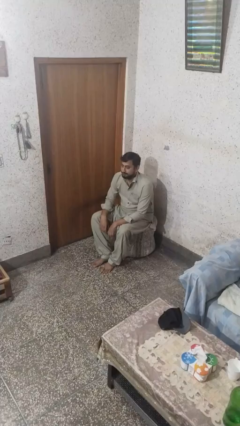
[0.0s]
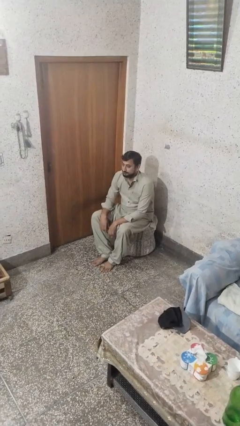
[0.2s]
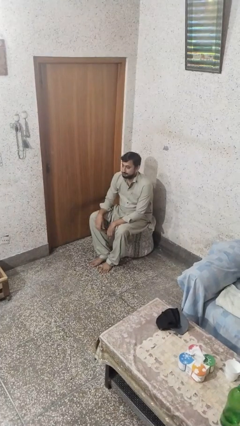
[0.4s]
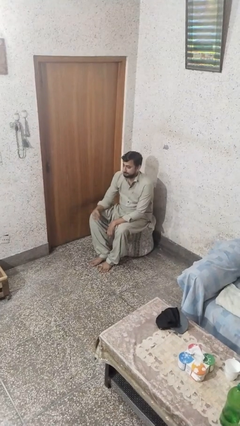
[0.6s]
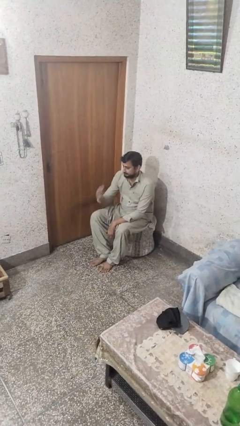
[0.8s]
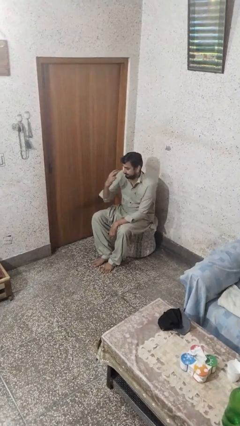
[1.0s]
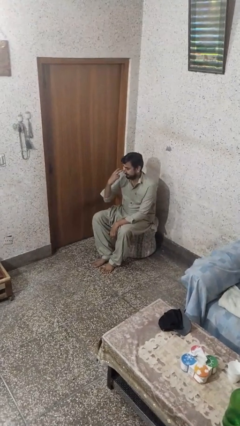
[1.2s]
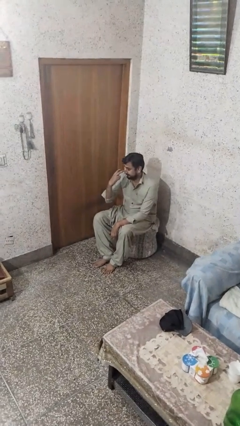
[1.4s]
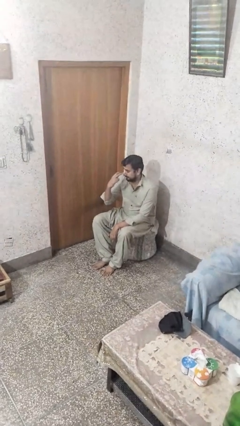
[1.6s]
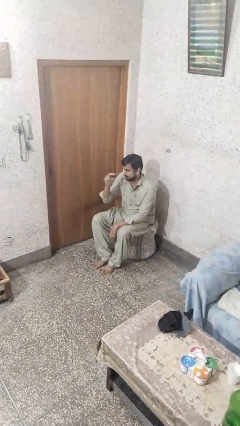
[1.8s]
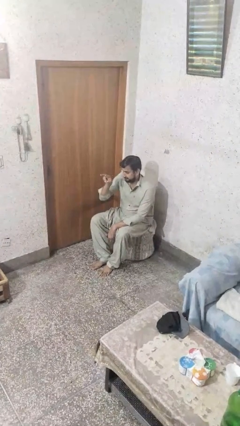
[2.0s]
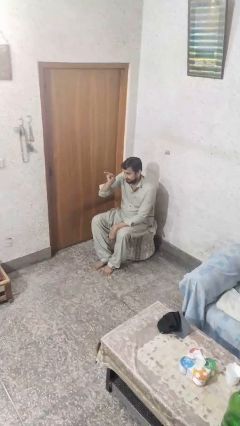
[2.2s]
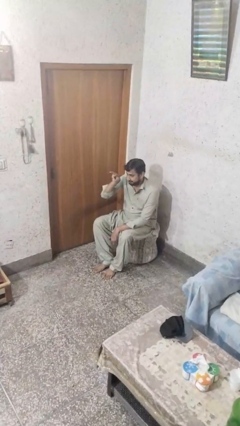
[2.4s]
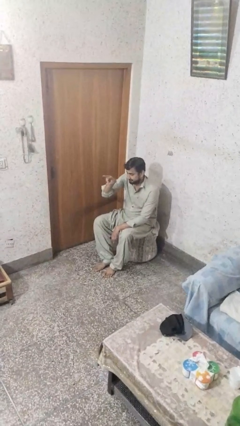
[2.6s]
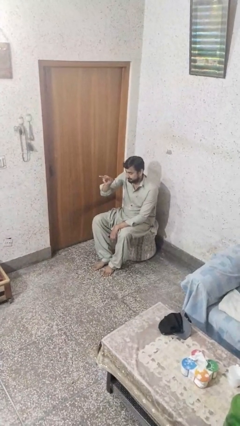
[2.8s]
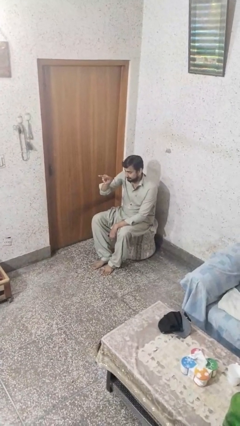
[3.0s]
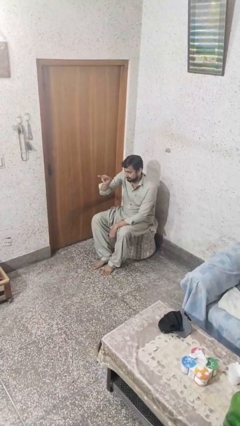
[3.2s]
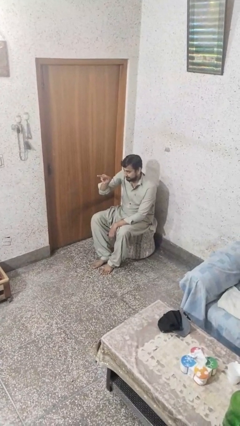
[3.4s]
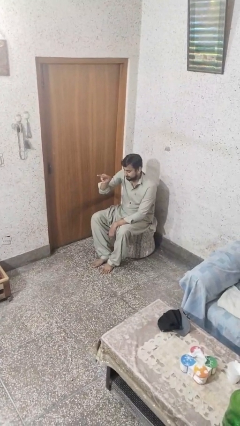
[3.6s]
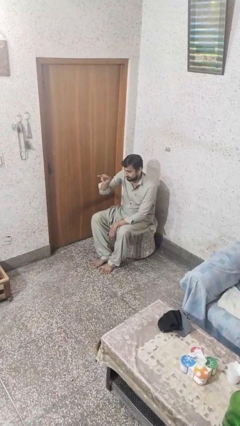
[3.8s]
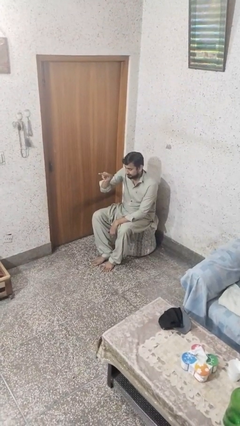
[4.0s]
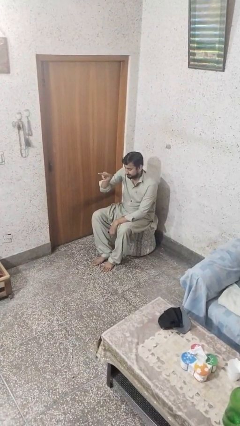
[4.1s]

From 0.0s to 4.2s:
person gestures watch closely

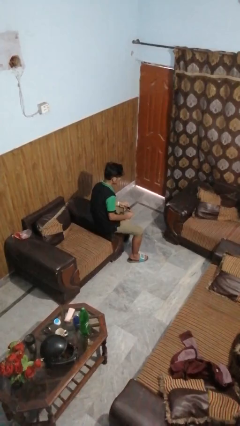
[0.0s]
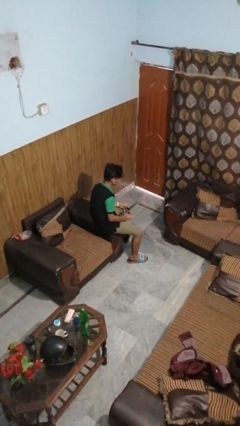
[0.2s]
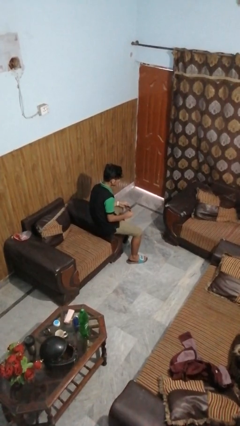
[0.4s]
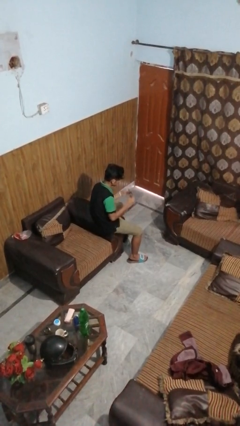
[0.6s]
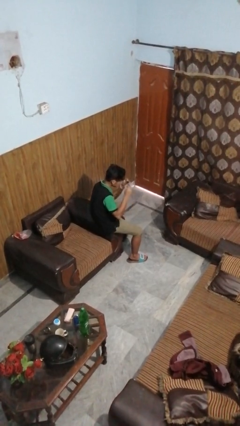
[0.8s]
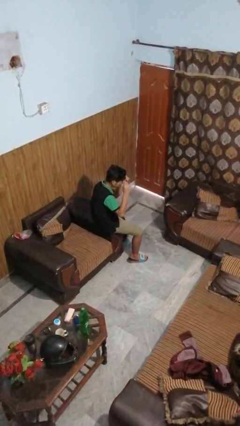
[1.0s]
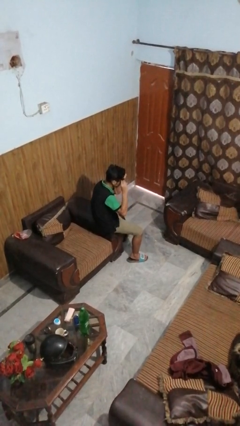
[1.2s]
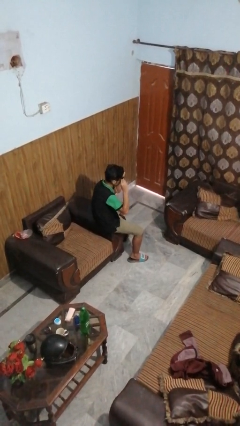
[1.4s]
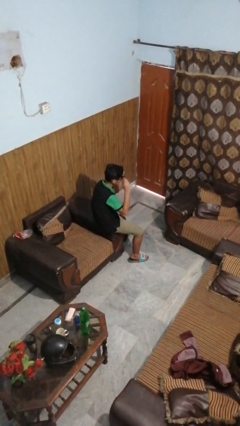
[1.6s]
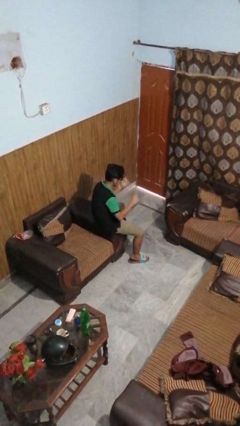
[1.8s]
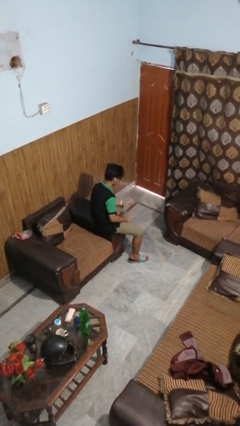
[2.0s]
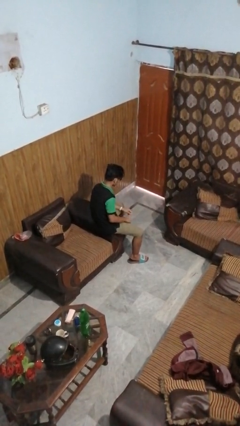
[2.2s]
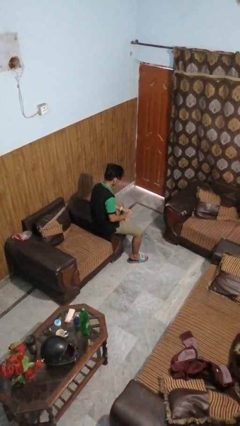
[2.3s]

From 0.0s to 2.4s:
person puts on sunglasses

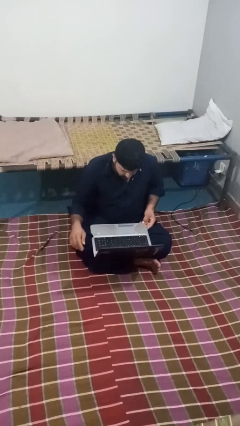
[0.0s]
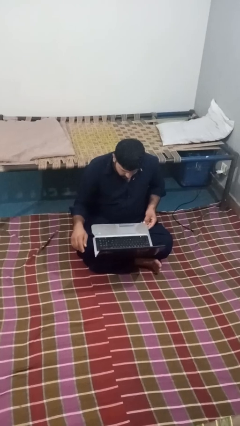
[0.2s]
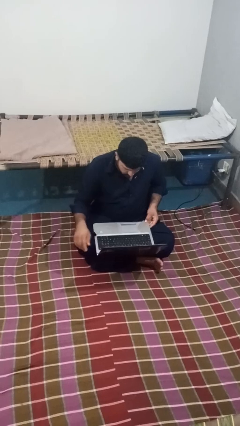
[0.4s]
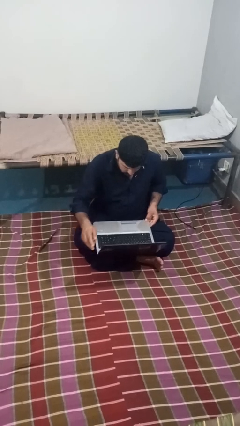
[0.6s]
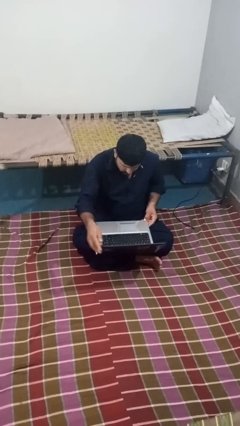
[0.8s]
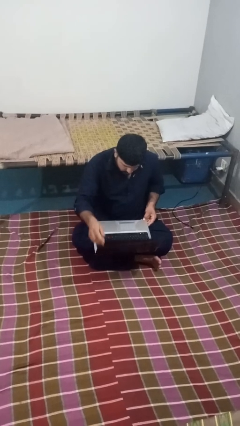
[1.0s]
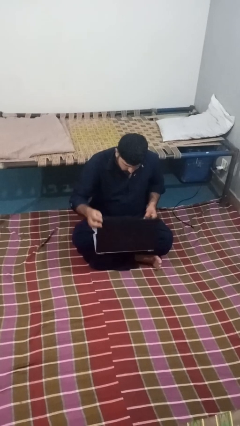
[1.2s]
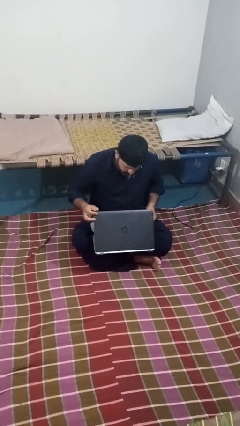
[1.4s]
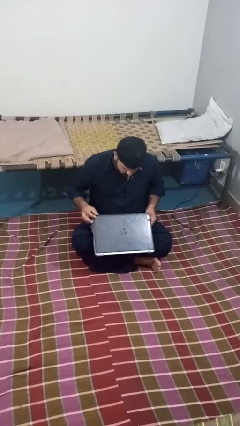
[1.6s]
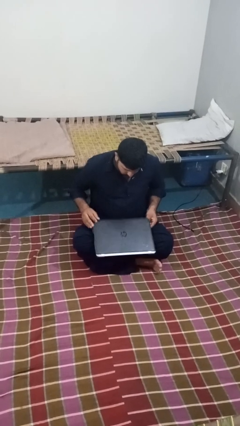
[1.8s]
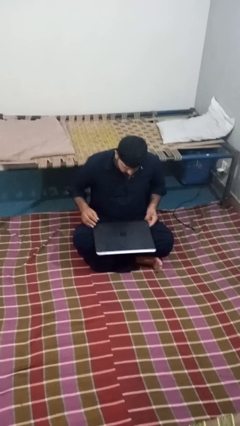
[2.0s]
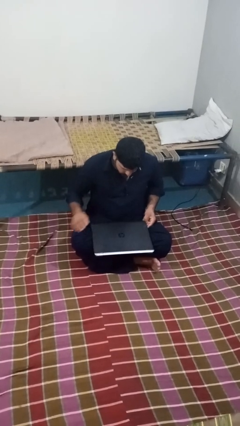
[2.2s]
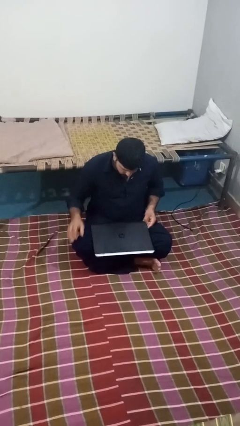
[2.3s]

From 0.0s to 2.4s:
person closes laptop

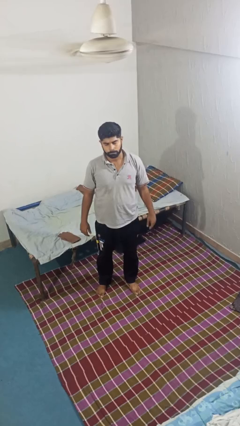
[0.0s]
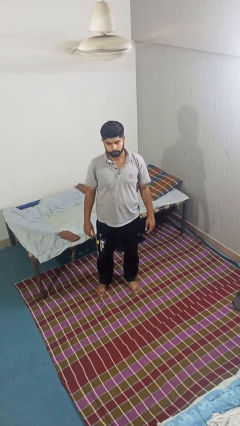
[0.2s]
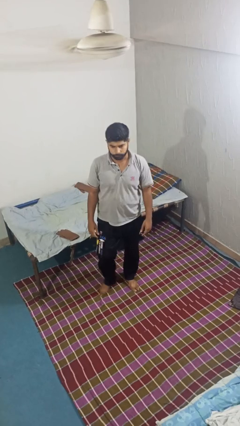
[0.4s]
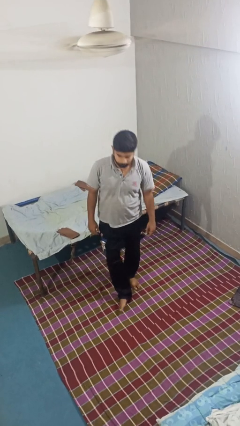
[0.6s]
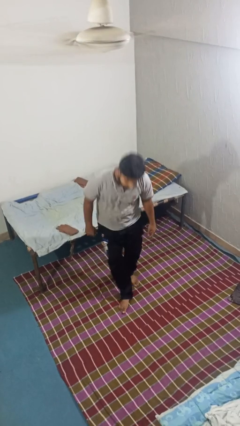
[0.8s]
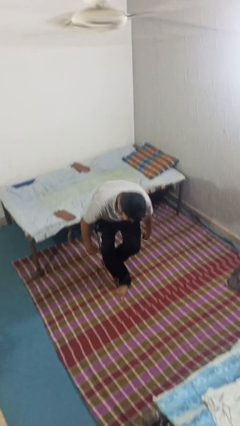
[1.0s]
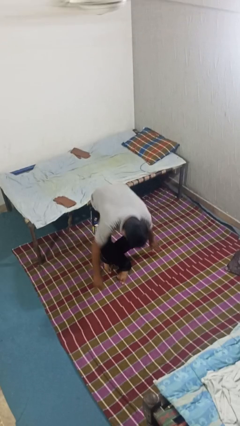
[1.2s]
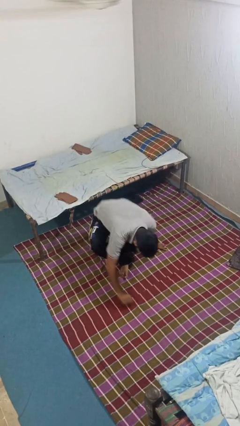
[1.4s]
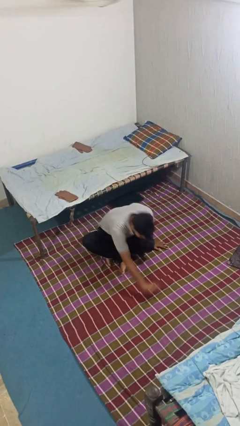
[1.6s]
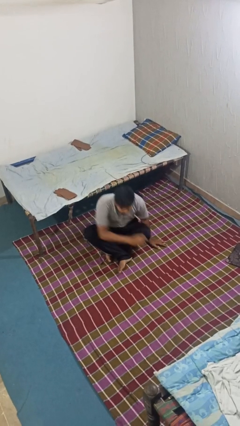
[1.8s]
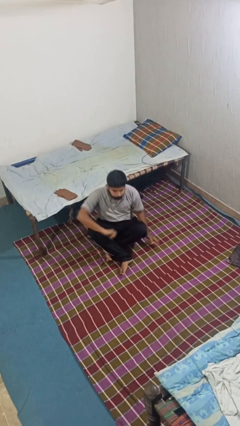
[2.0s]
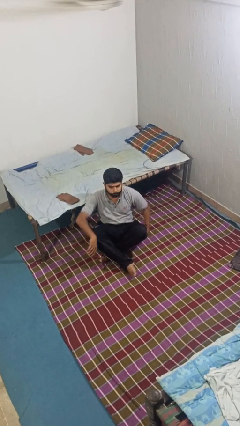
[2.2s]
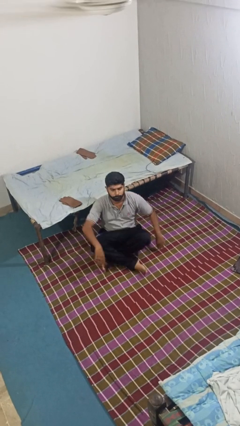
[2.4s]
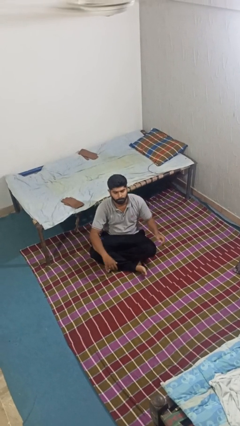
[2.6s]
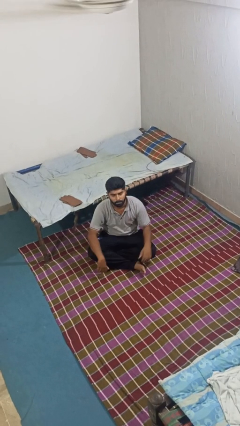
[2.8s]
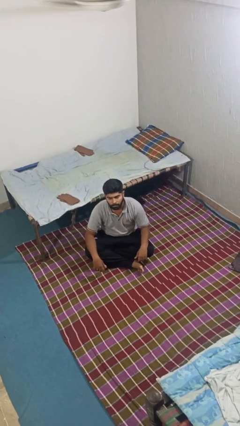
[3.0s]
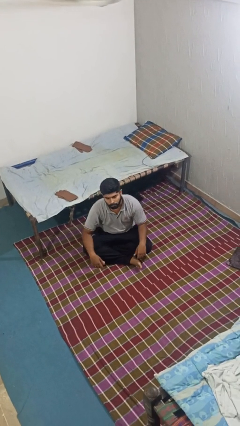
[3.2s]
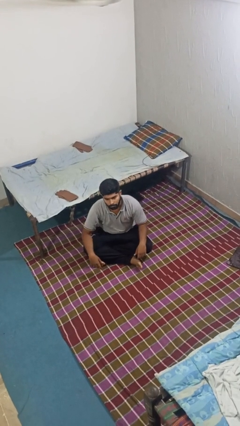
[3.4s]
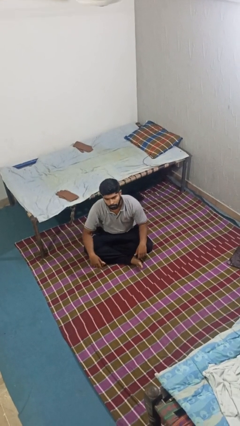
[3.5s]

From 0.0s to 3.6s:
person sits crisscross

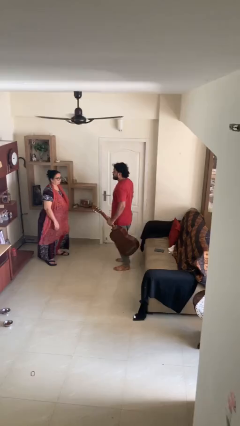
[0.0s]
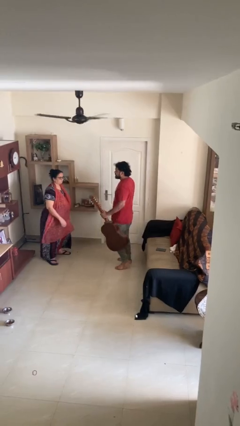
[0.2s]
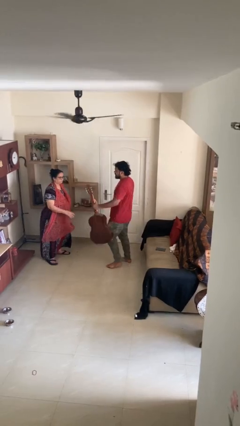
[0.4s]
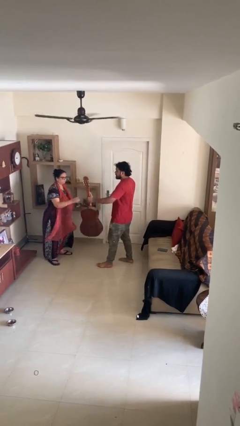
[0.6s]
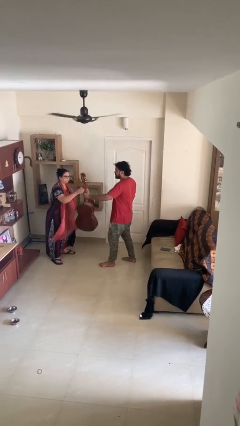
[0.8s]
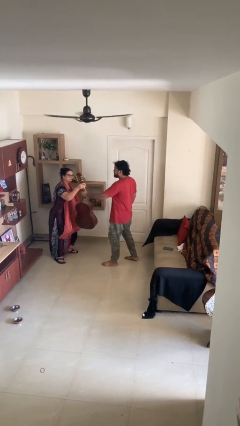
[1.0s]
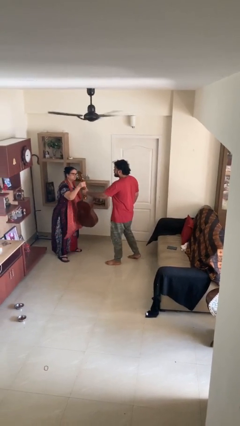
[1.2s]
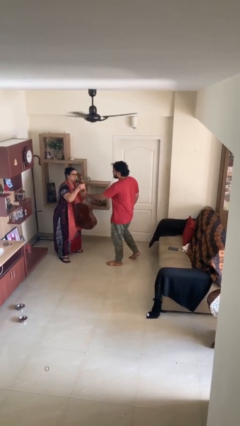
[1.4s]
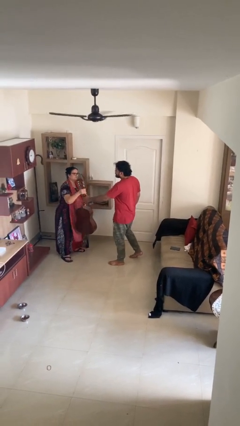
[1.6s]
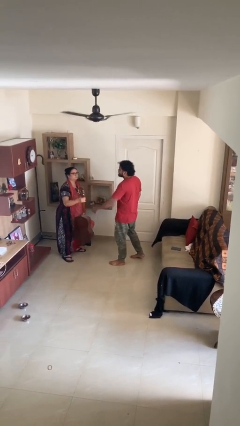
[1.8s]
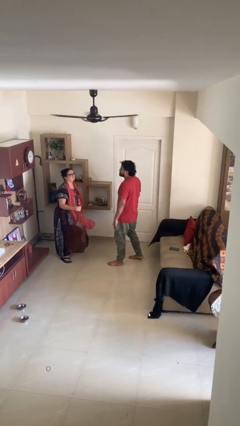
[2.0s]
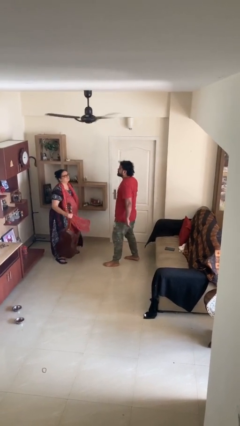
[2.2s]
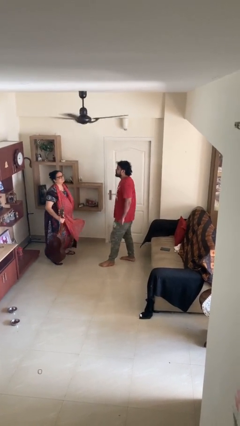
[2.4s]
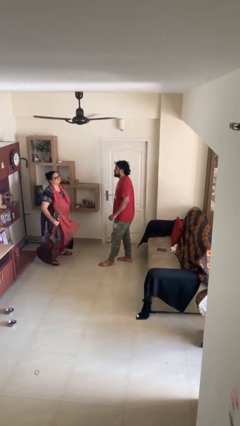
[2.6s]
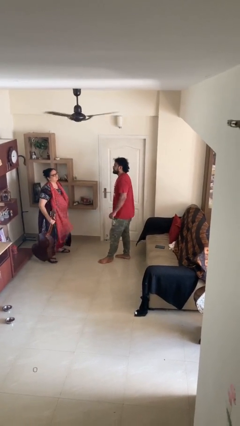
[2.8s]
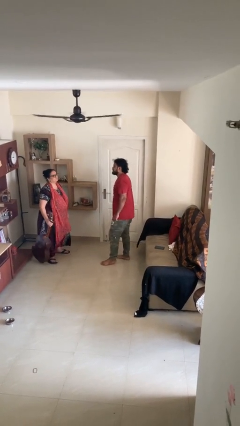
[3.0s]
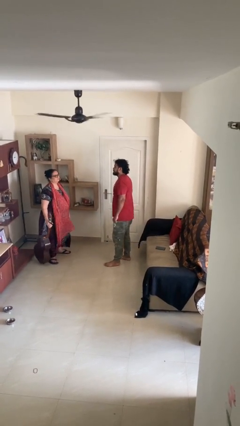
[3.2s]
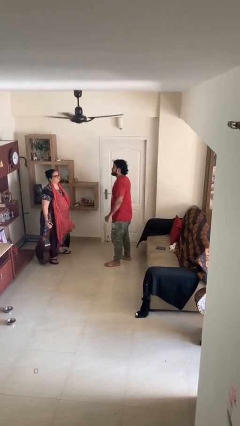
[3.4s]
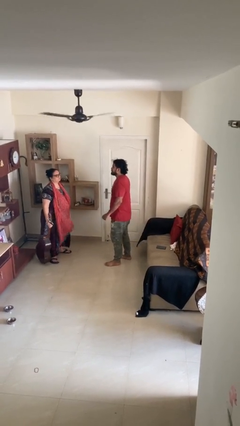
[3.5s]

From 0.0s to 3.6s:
person transfers object to person

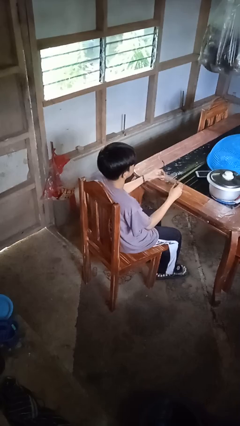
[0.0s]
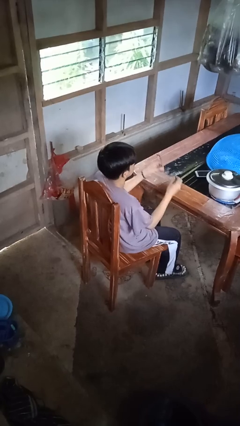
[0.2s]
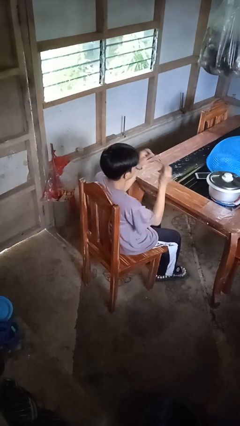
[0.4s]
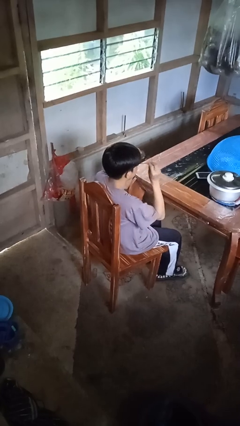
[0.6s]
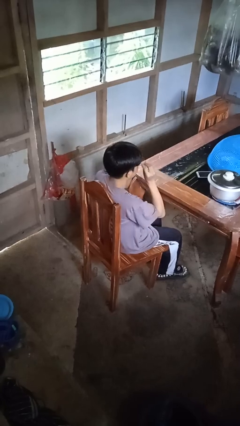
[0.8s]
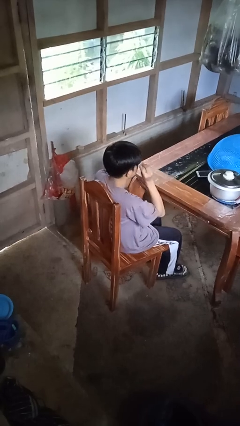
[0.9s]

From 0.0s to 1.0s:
person puts on glasses

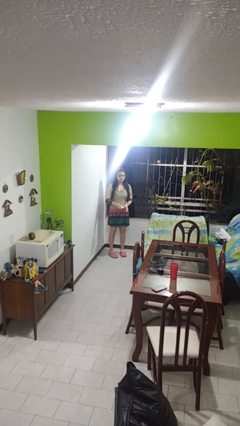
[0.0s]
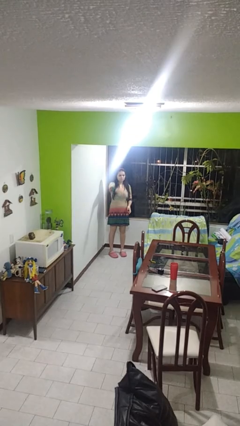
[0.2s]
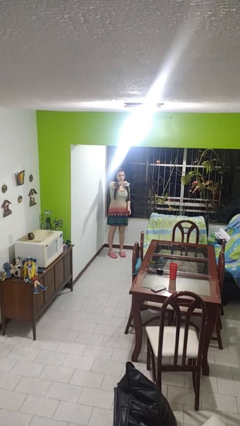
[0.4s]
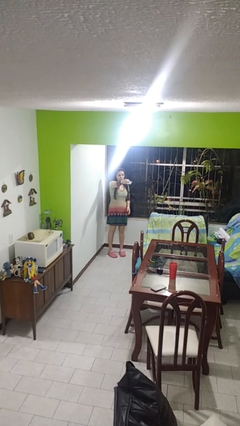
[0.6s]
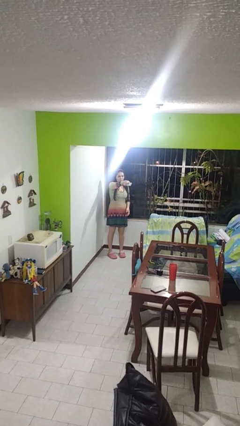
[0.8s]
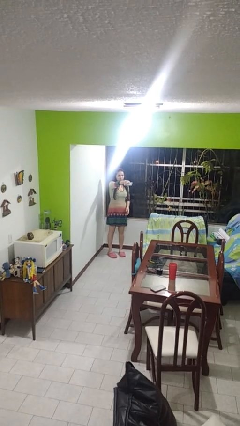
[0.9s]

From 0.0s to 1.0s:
person uses television remote
